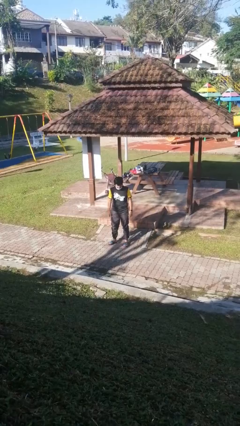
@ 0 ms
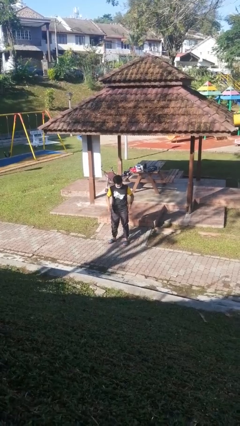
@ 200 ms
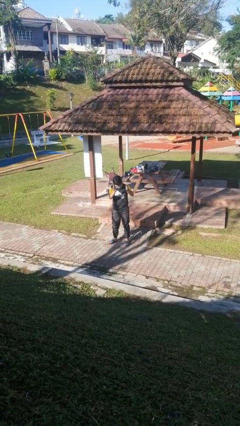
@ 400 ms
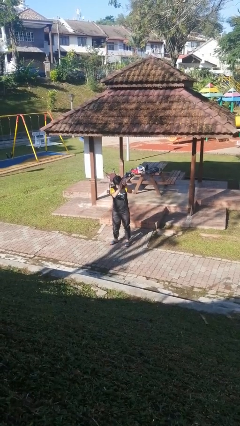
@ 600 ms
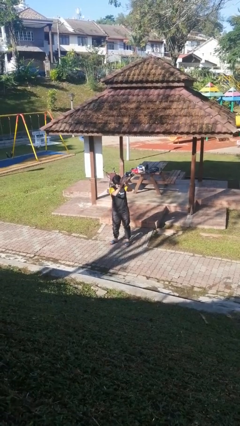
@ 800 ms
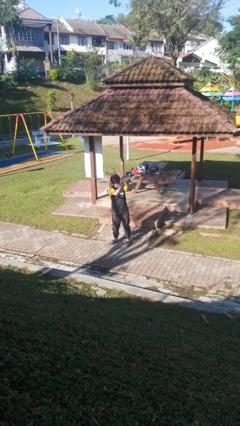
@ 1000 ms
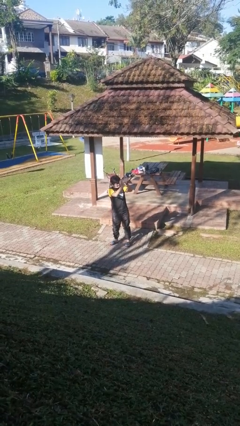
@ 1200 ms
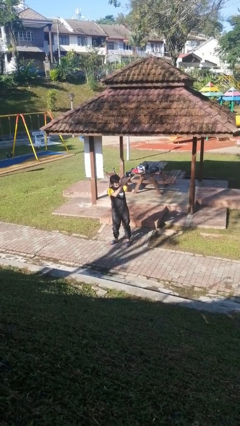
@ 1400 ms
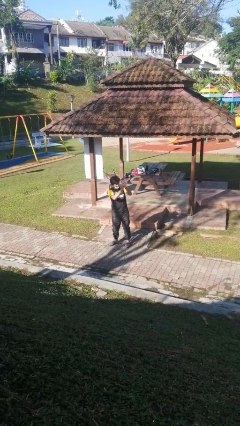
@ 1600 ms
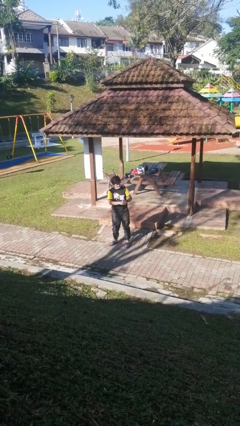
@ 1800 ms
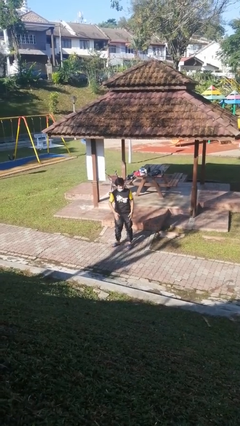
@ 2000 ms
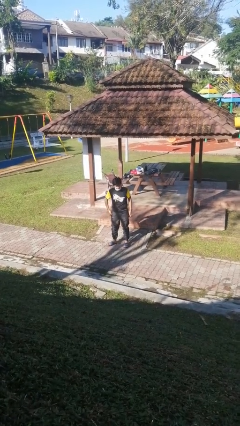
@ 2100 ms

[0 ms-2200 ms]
person claps hands

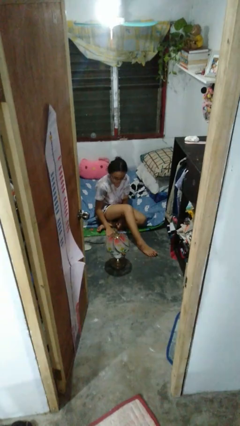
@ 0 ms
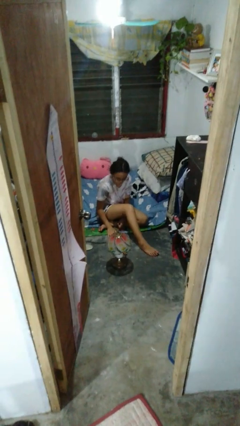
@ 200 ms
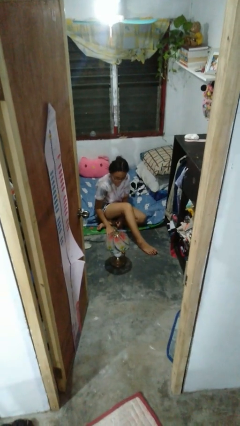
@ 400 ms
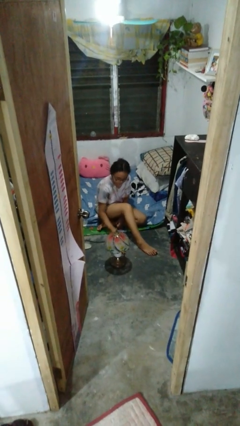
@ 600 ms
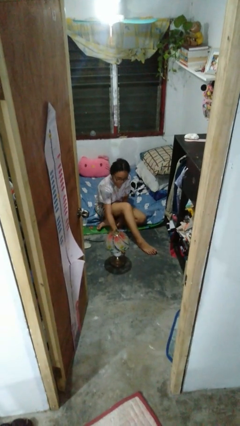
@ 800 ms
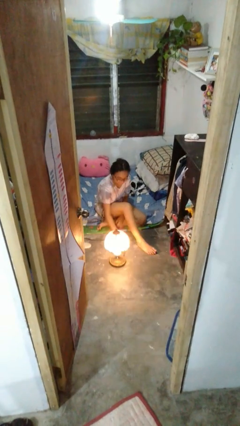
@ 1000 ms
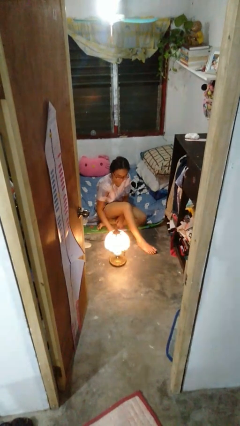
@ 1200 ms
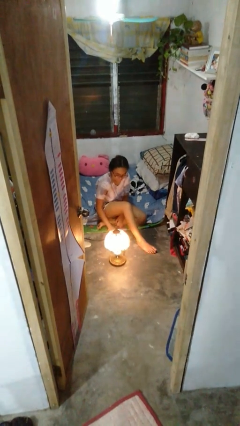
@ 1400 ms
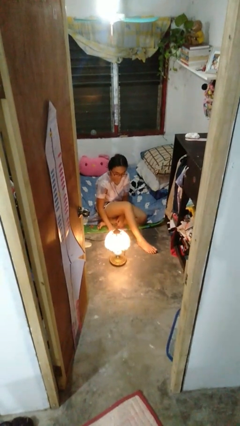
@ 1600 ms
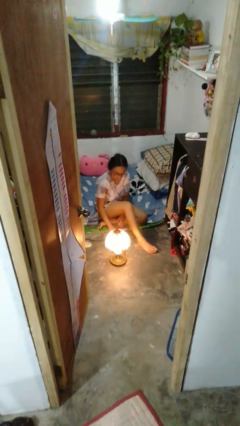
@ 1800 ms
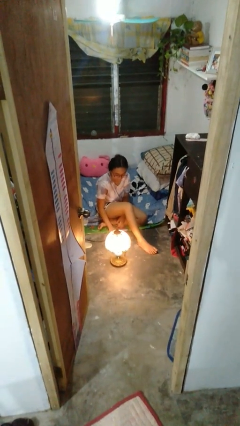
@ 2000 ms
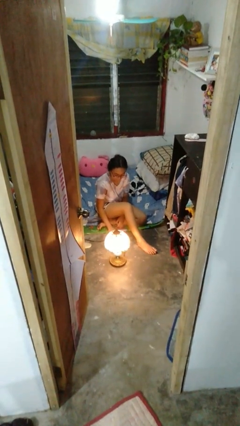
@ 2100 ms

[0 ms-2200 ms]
person turns on lamp

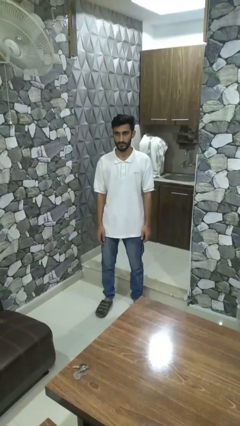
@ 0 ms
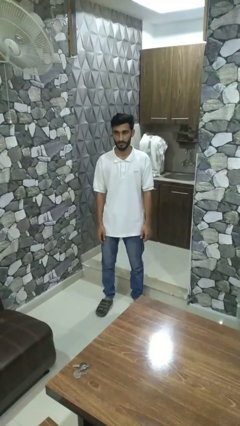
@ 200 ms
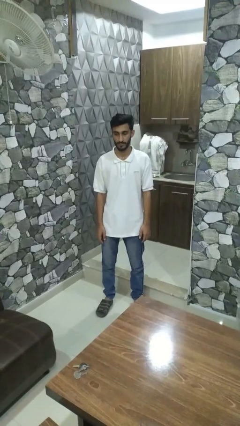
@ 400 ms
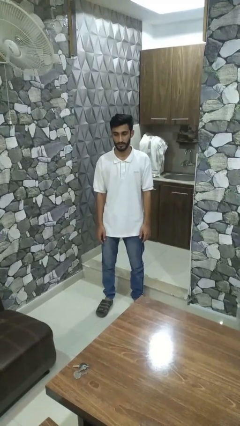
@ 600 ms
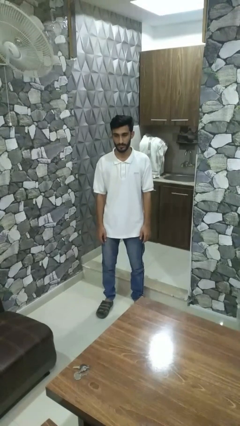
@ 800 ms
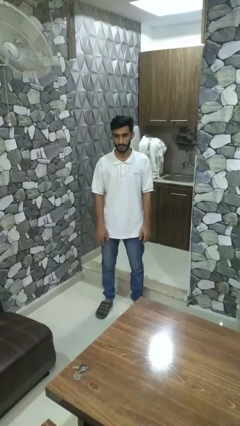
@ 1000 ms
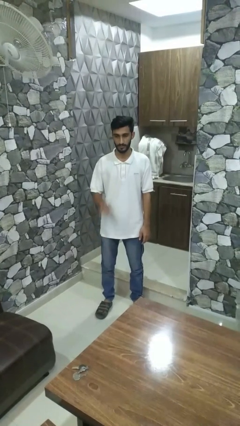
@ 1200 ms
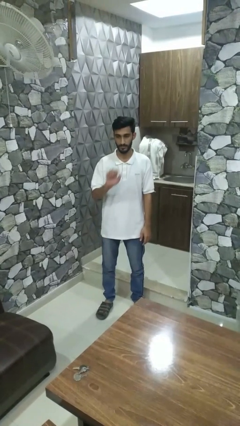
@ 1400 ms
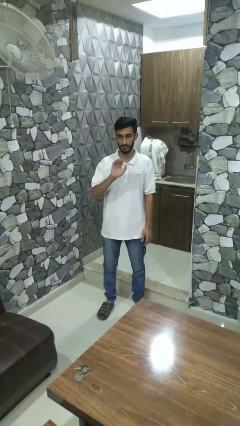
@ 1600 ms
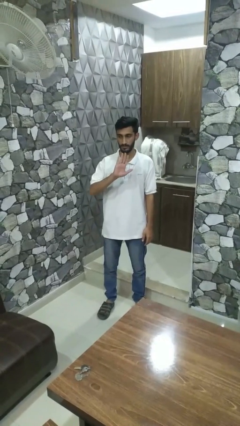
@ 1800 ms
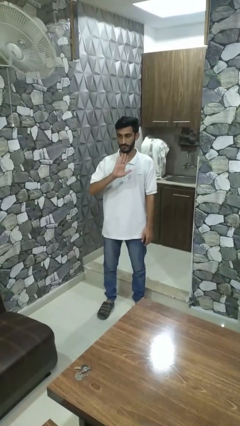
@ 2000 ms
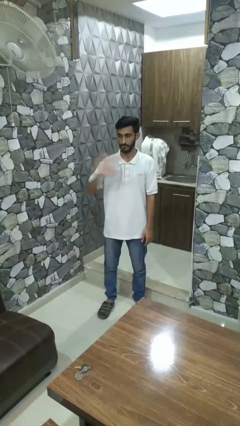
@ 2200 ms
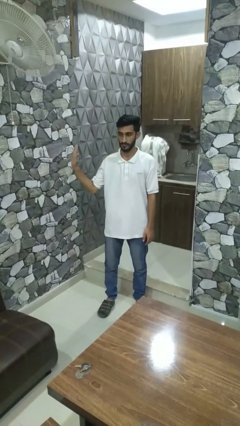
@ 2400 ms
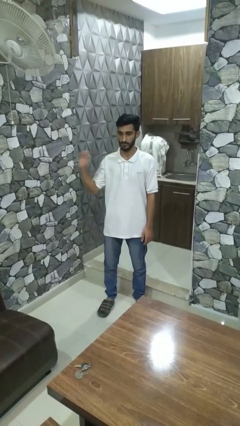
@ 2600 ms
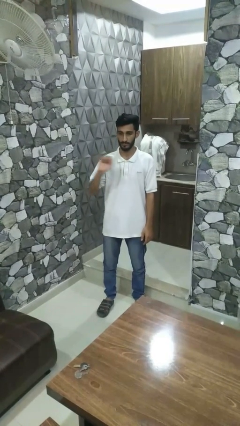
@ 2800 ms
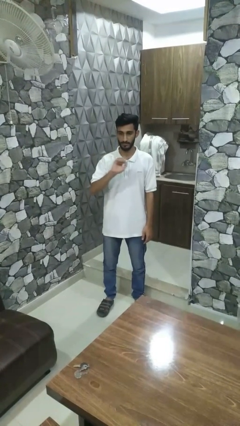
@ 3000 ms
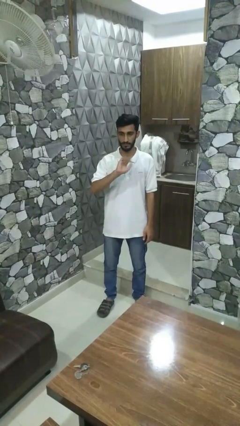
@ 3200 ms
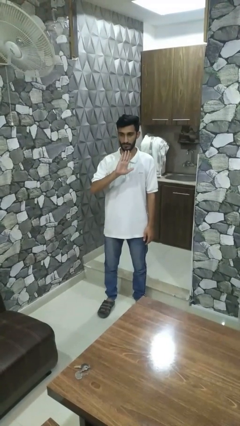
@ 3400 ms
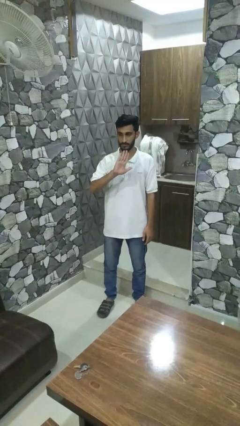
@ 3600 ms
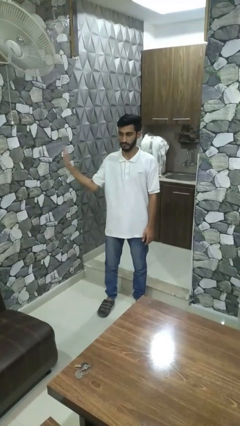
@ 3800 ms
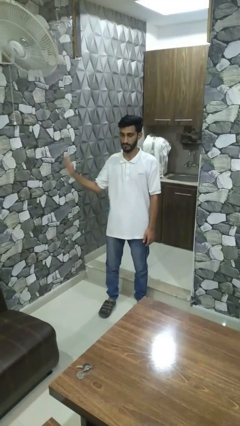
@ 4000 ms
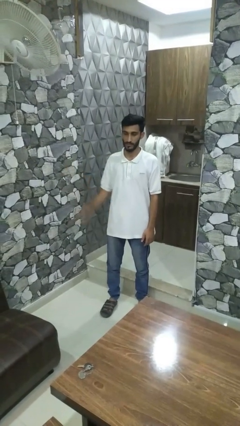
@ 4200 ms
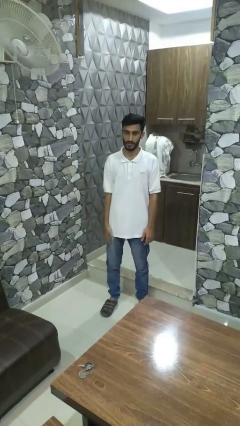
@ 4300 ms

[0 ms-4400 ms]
person gestures swipe right

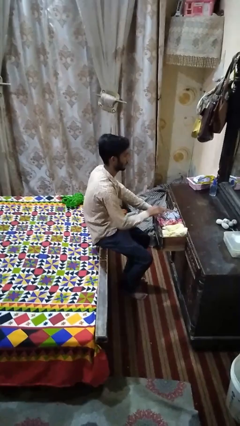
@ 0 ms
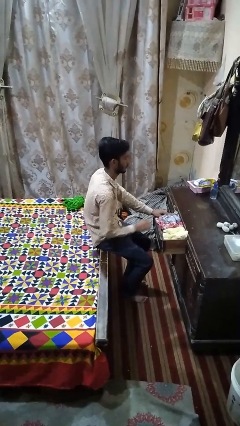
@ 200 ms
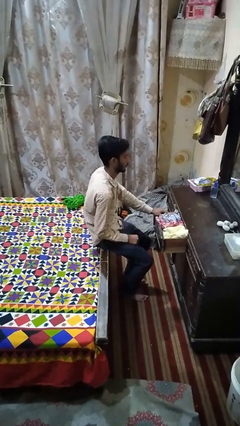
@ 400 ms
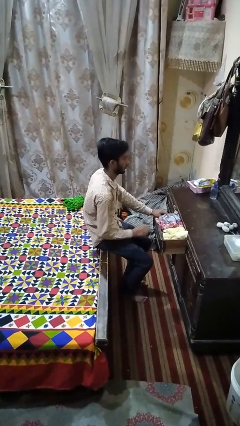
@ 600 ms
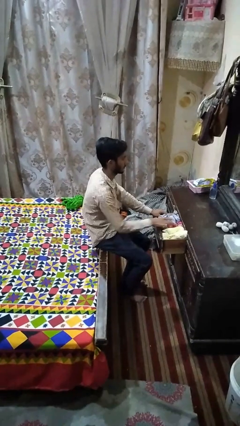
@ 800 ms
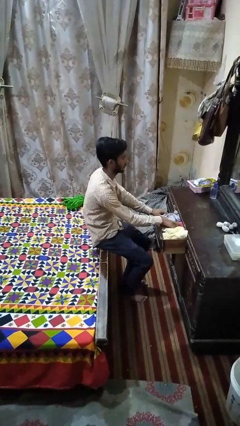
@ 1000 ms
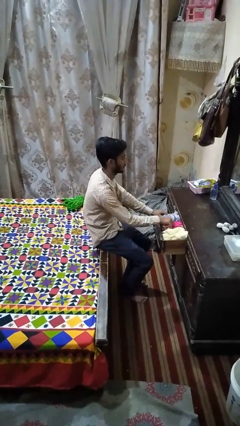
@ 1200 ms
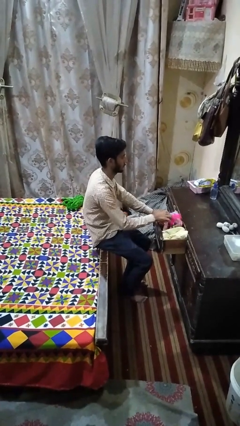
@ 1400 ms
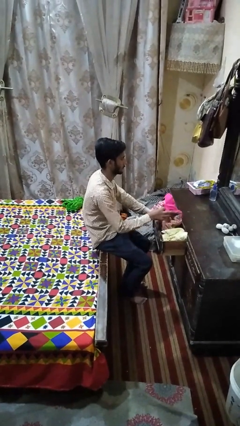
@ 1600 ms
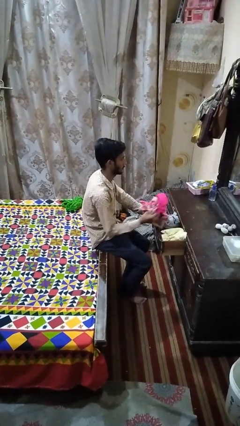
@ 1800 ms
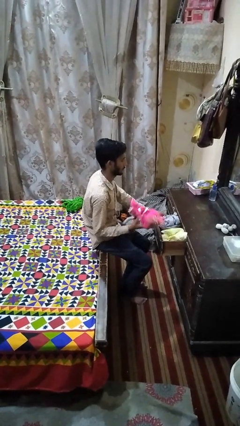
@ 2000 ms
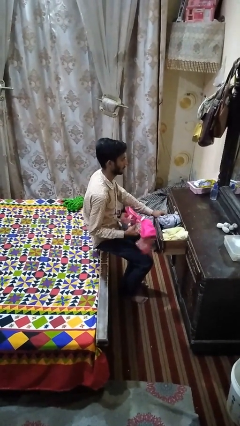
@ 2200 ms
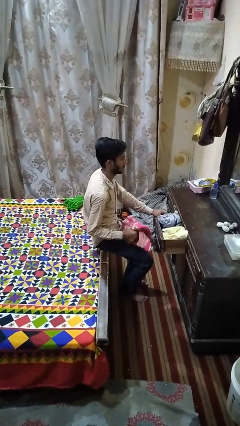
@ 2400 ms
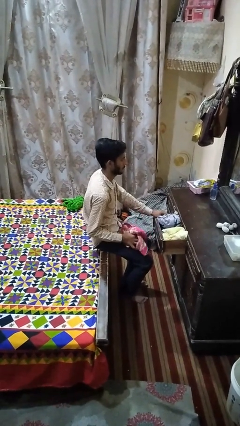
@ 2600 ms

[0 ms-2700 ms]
person takes clothes from dresser

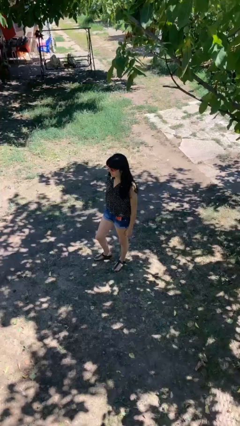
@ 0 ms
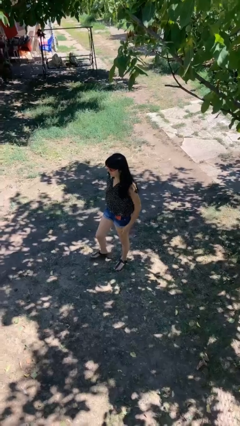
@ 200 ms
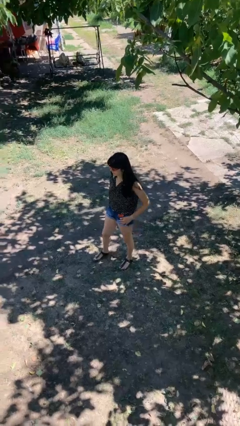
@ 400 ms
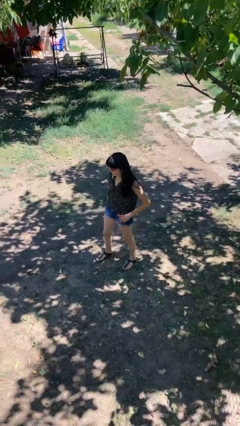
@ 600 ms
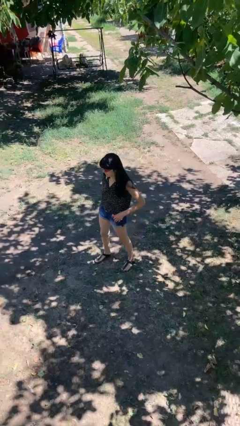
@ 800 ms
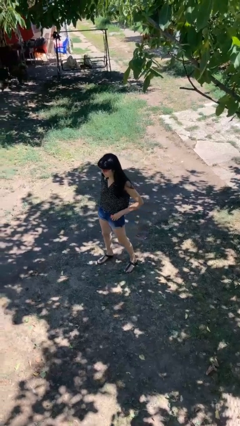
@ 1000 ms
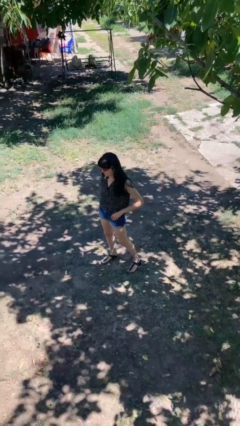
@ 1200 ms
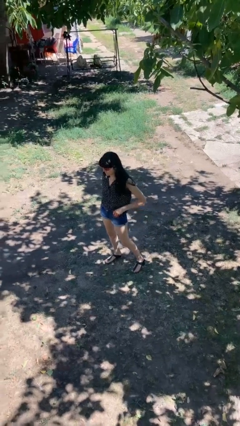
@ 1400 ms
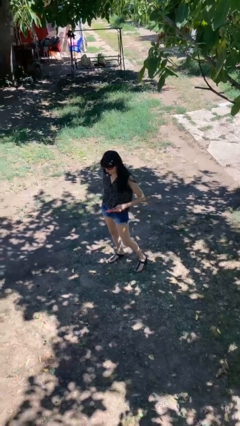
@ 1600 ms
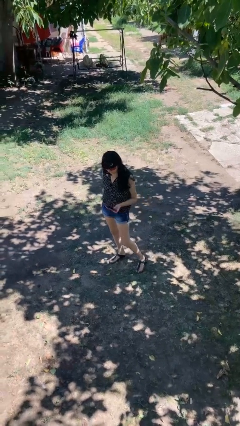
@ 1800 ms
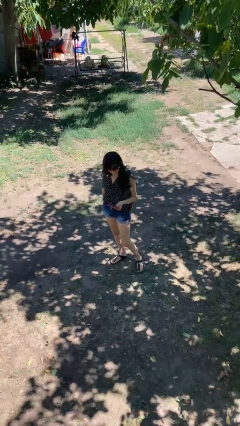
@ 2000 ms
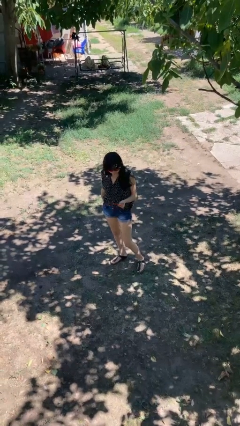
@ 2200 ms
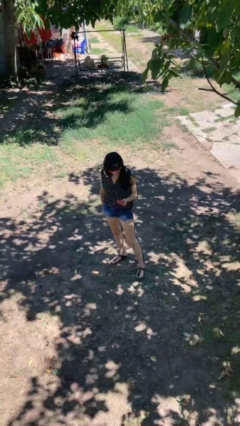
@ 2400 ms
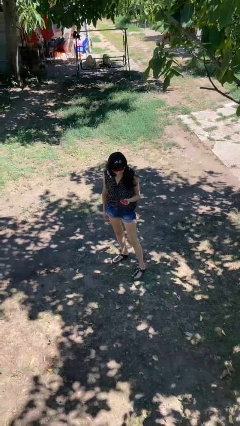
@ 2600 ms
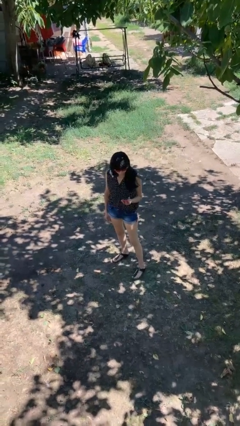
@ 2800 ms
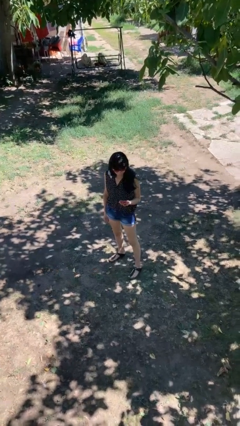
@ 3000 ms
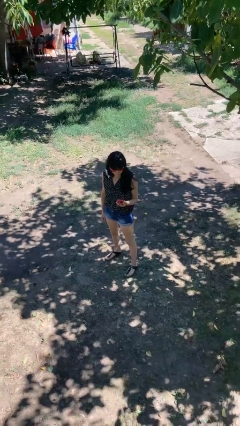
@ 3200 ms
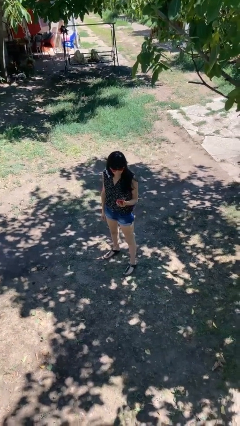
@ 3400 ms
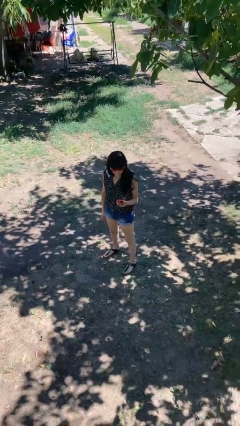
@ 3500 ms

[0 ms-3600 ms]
person takes phone from pocket

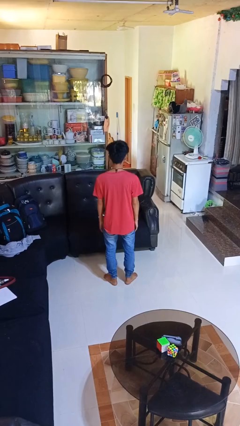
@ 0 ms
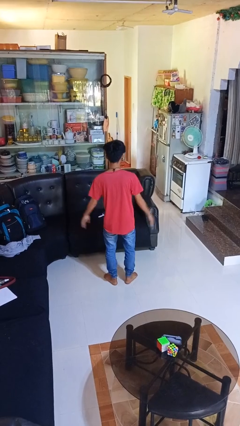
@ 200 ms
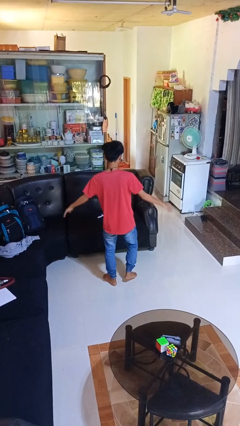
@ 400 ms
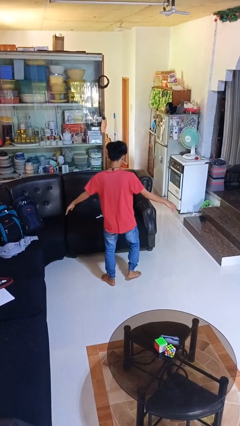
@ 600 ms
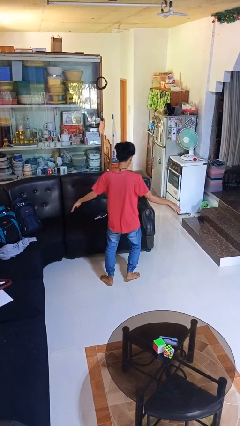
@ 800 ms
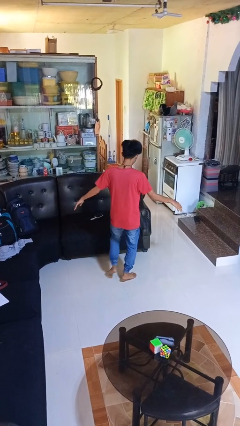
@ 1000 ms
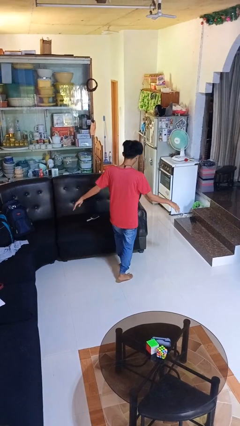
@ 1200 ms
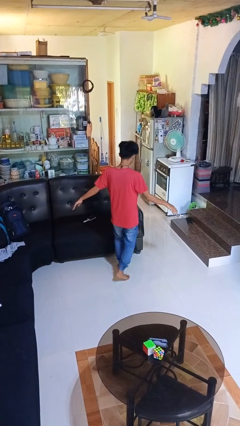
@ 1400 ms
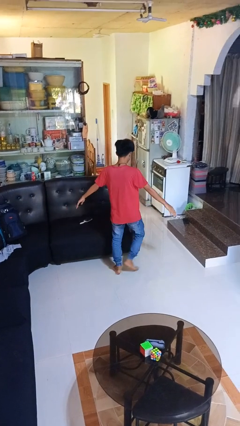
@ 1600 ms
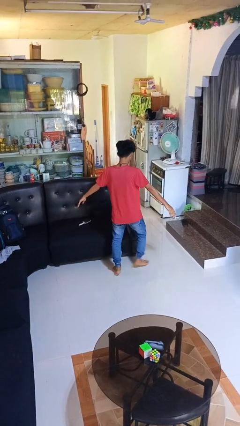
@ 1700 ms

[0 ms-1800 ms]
person throws object into air

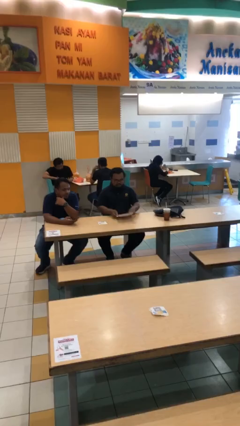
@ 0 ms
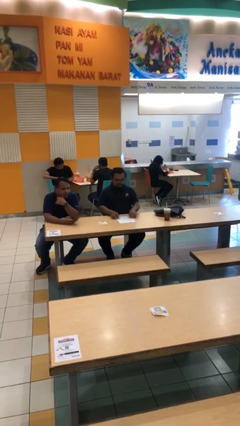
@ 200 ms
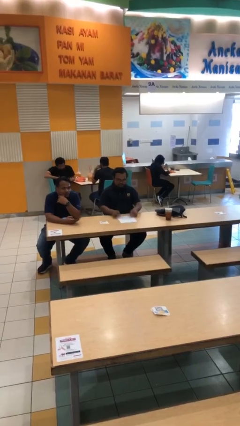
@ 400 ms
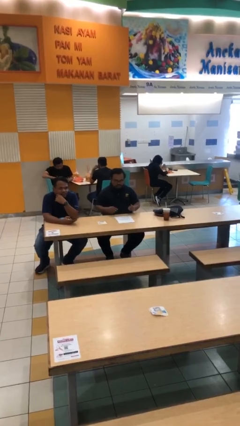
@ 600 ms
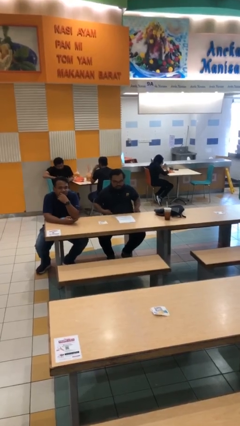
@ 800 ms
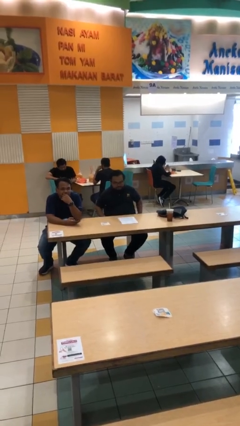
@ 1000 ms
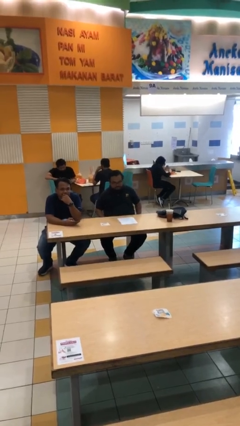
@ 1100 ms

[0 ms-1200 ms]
person puts down object on table
